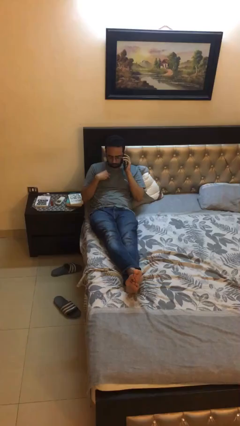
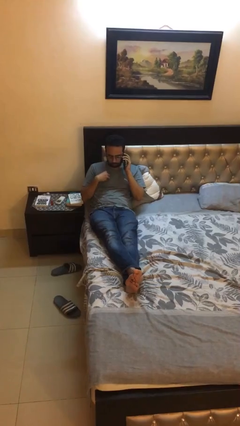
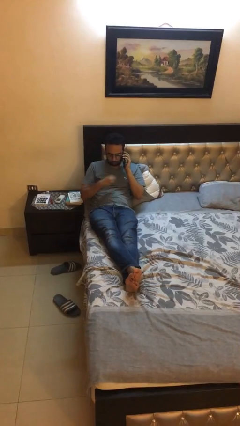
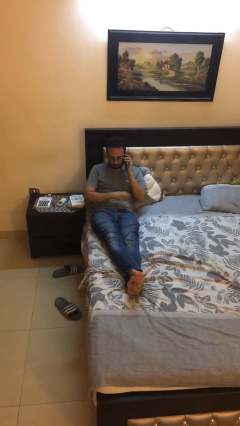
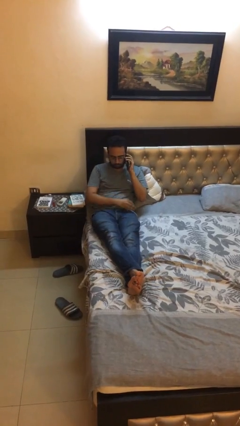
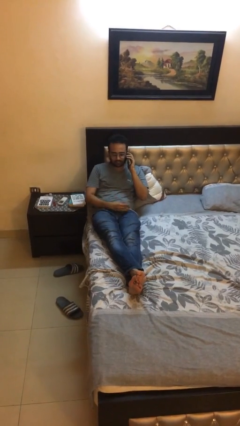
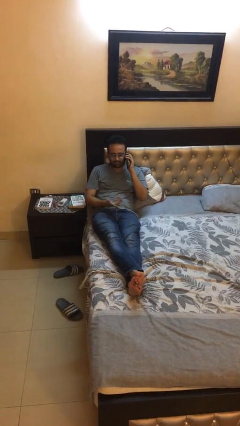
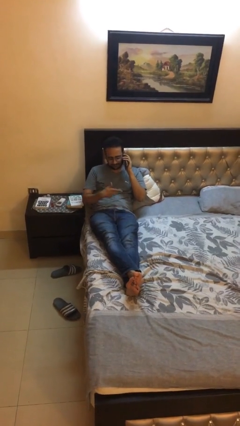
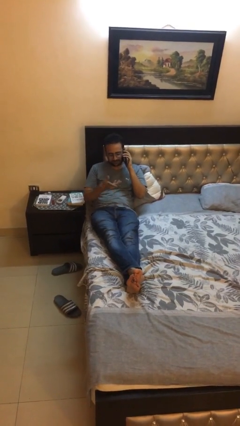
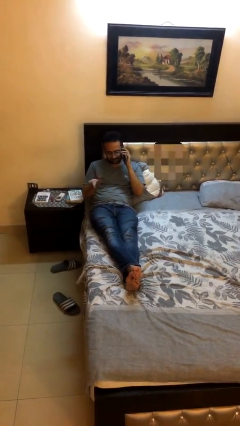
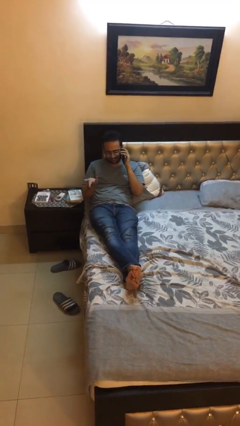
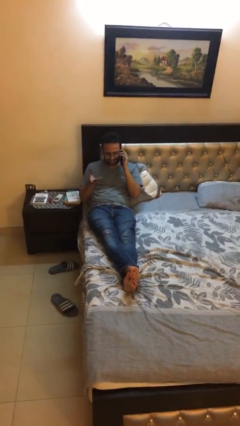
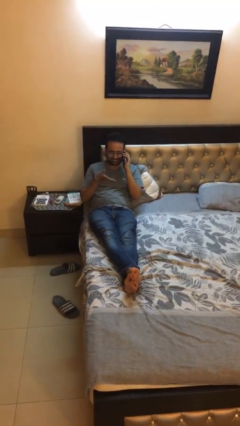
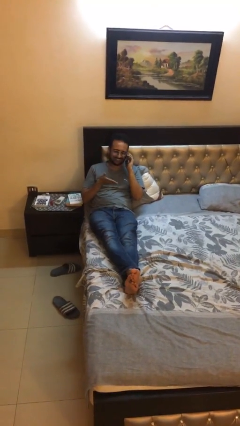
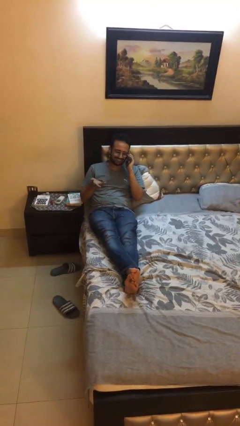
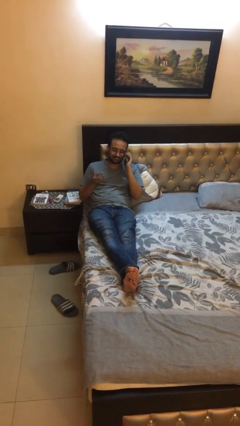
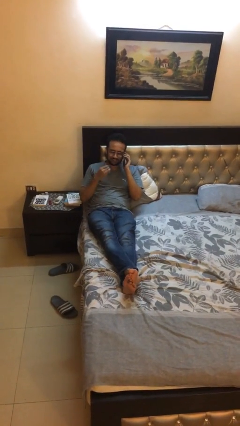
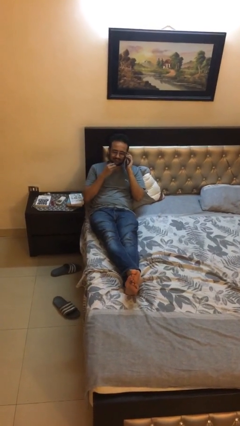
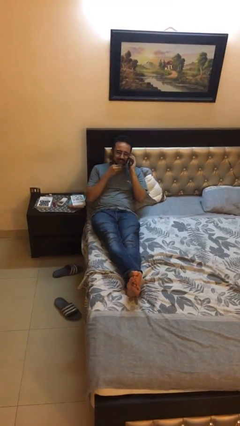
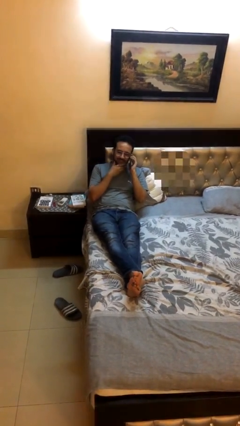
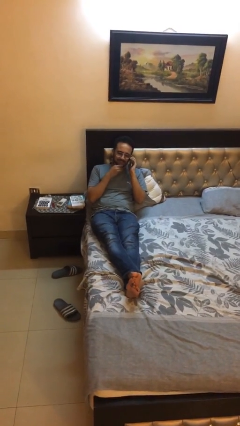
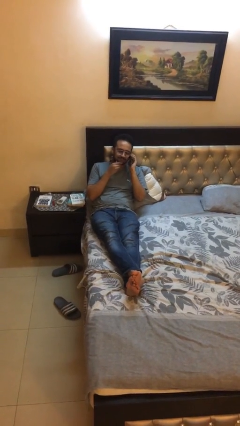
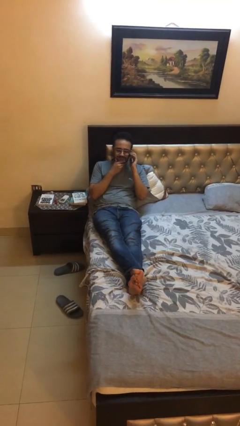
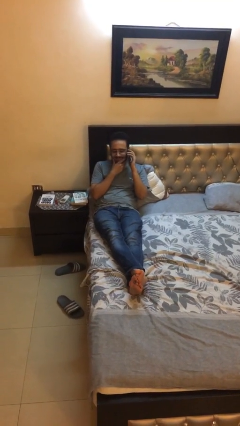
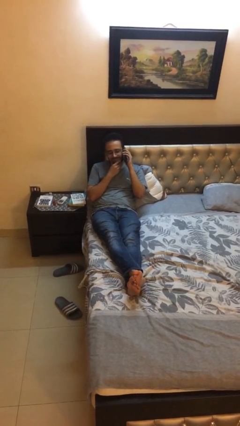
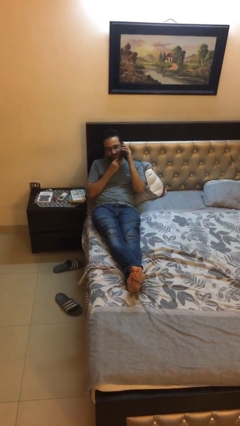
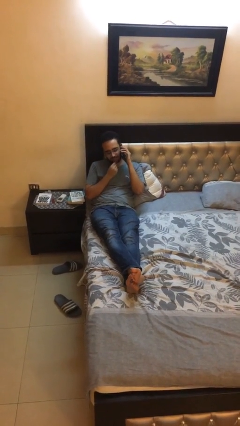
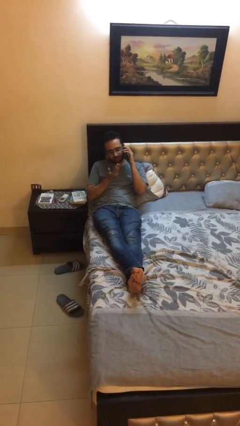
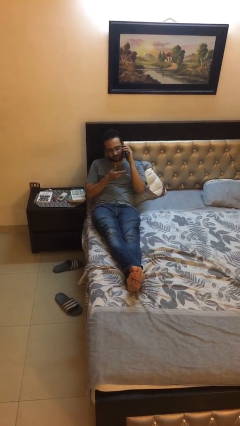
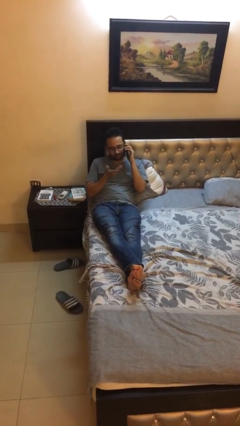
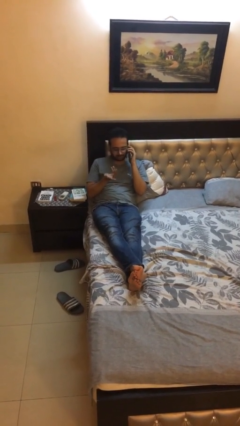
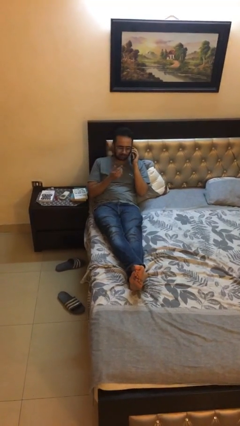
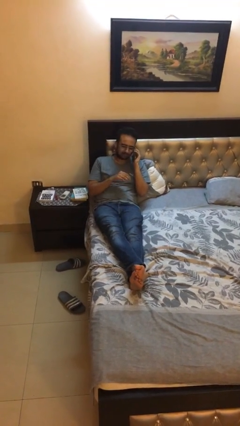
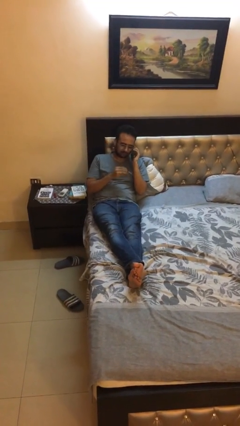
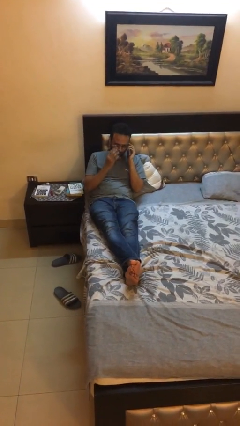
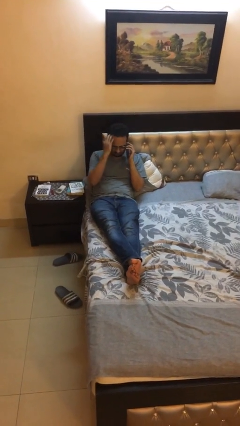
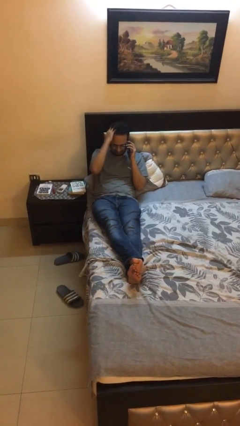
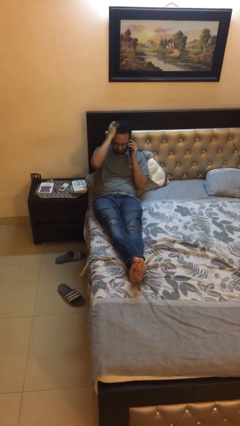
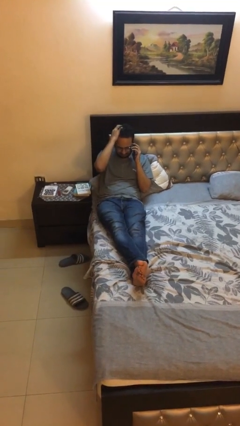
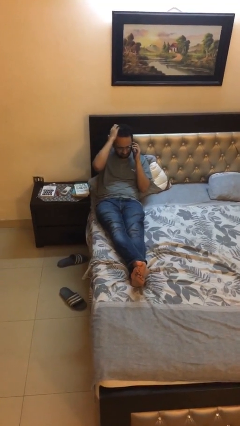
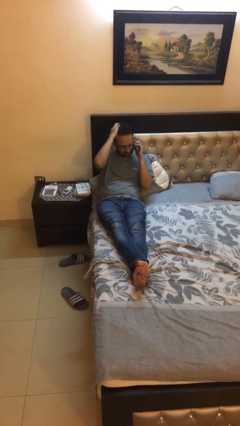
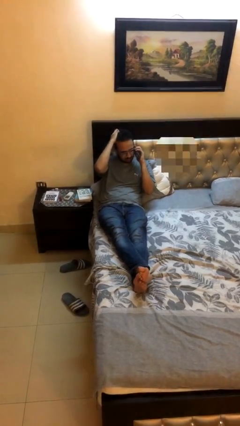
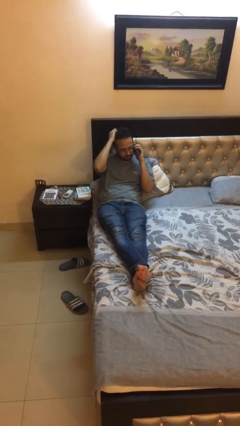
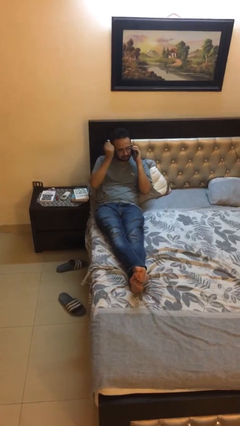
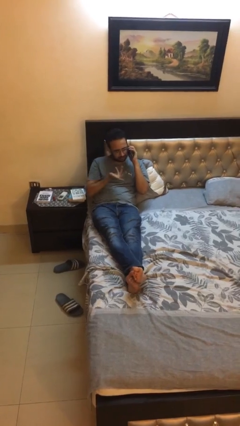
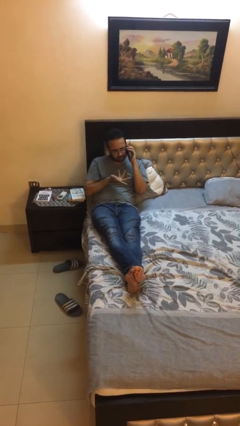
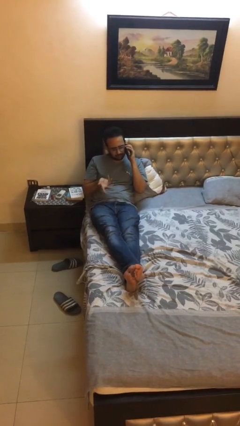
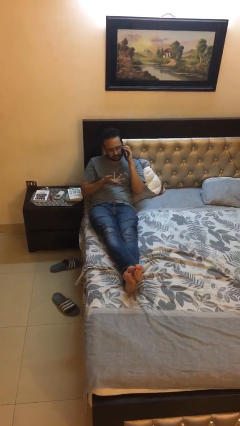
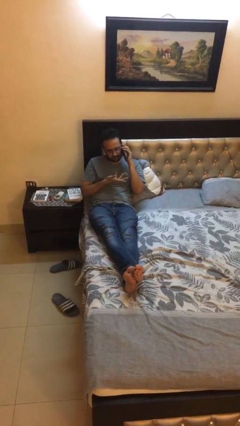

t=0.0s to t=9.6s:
person talks on phone

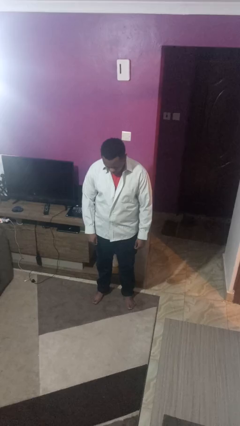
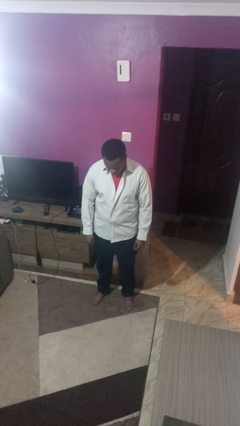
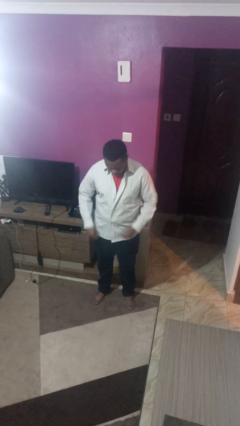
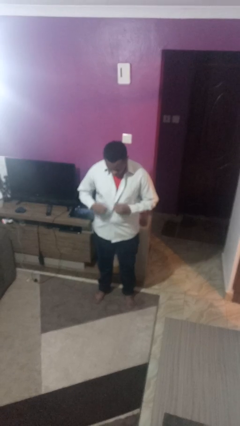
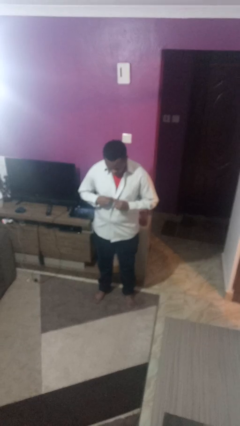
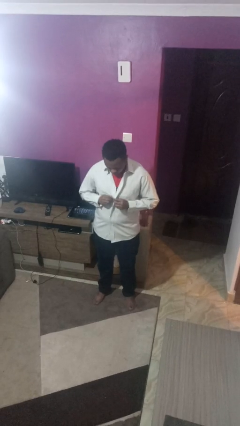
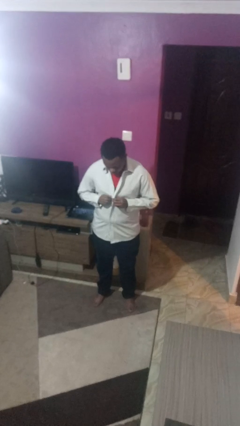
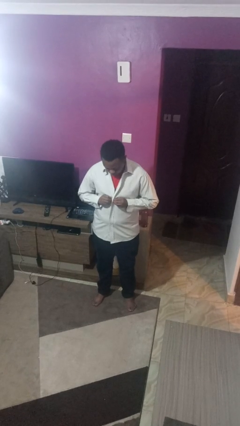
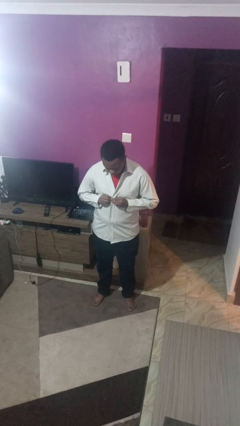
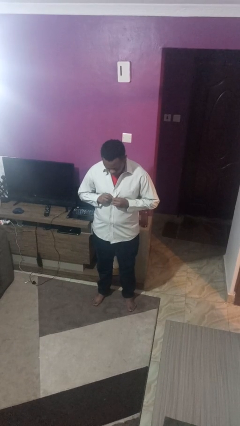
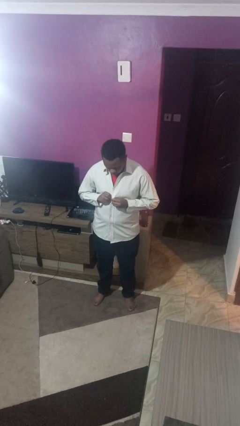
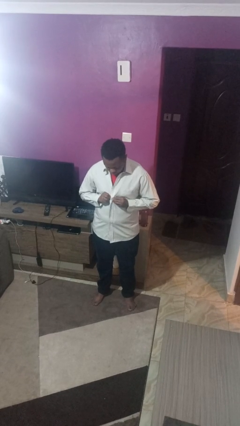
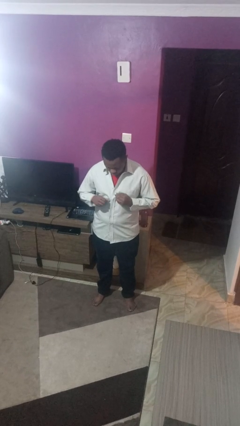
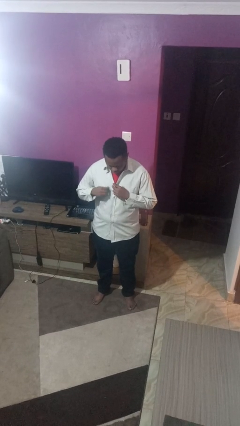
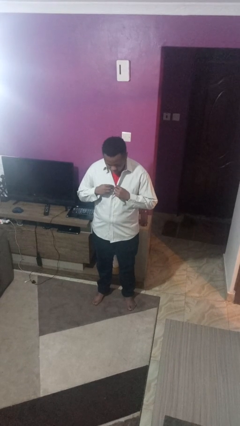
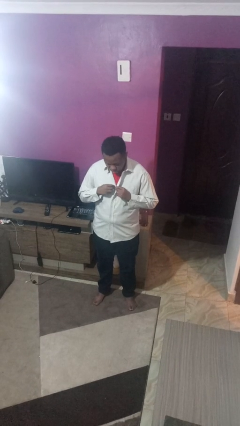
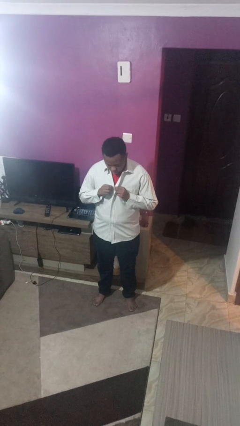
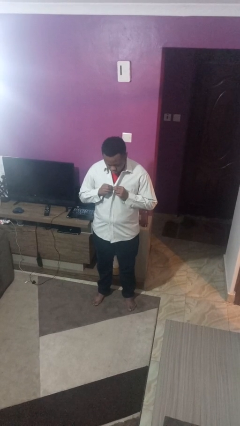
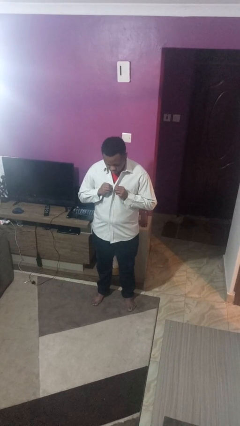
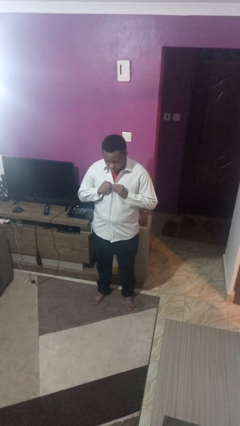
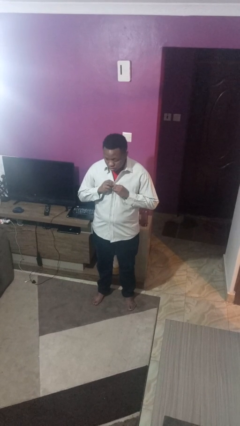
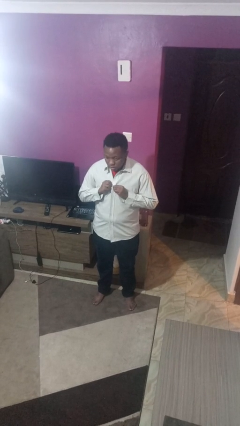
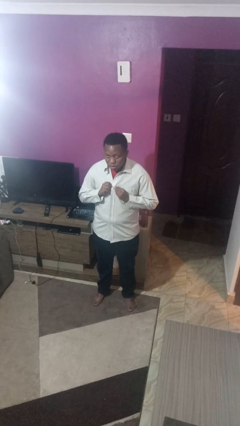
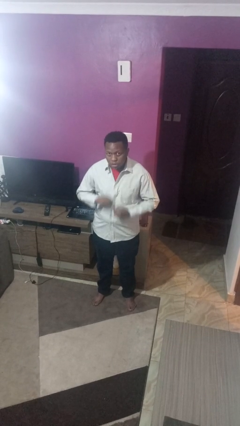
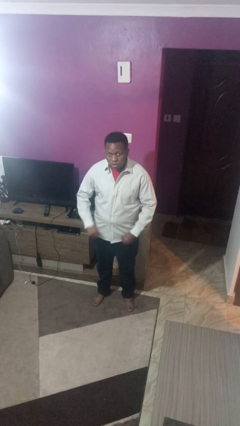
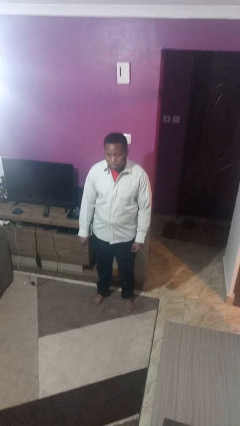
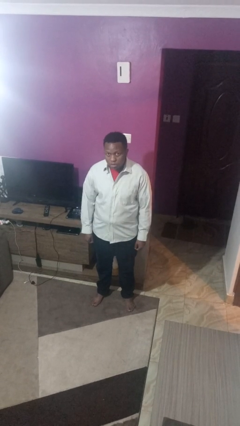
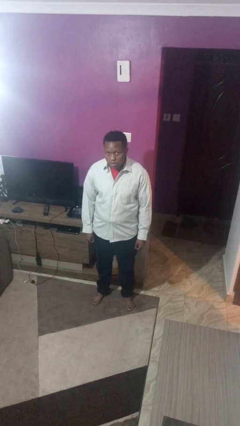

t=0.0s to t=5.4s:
person buttons shirt

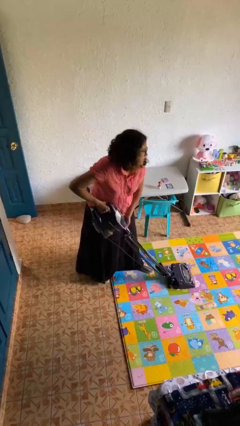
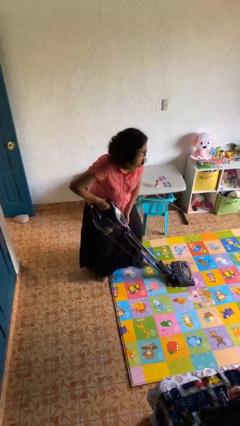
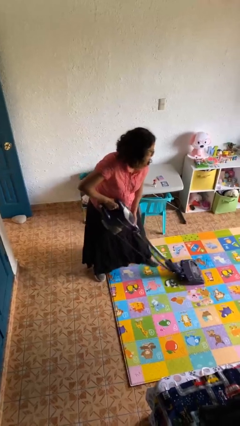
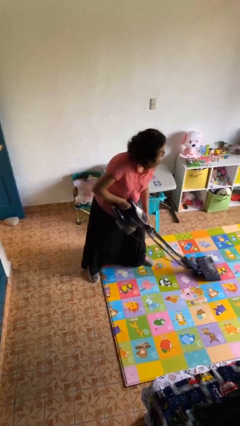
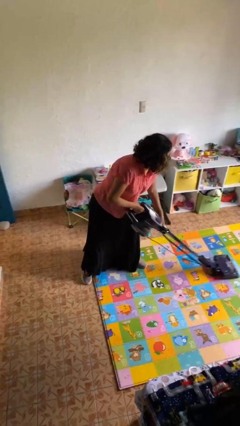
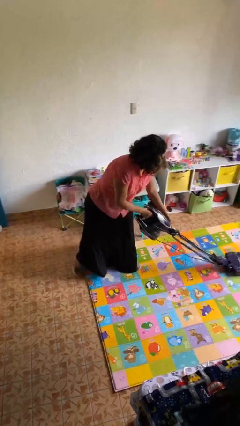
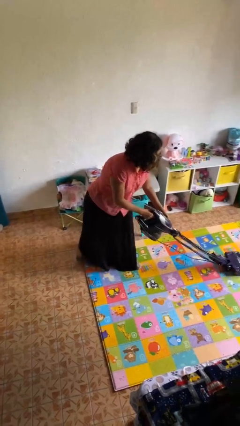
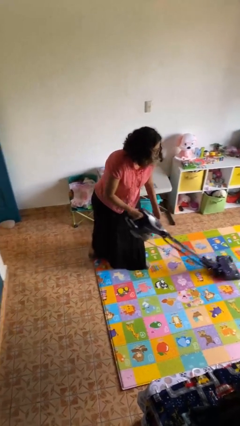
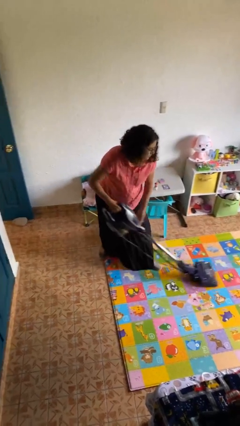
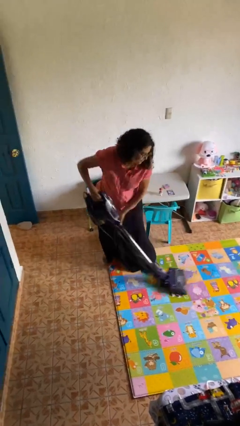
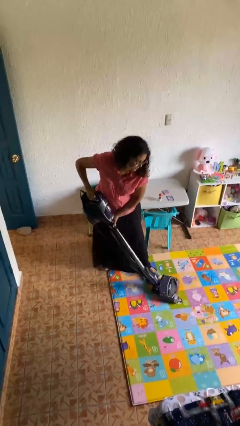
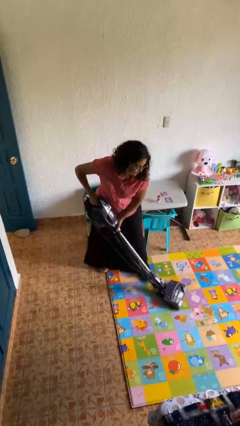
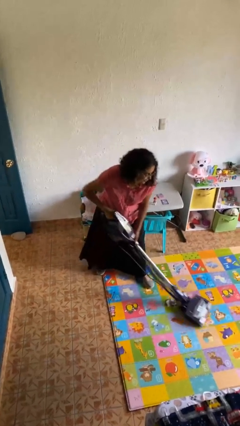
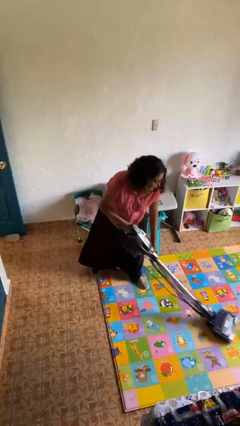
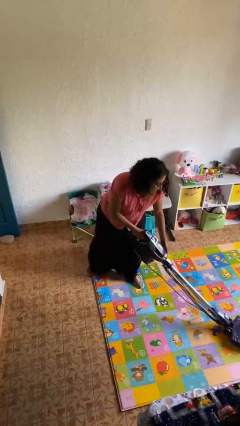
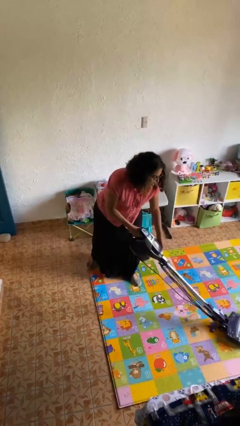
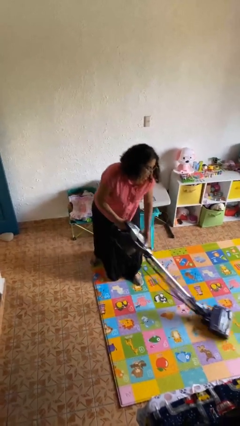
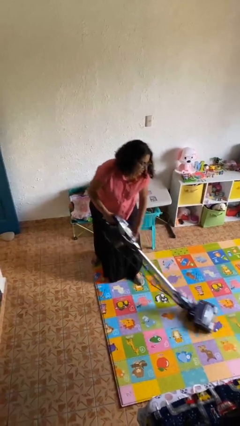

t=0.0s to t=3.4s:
person vacuums carpet
